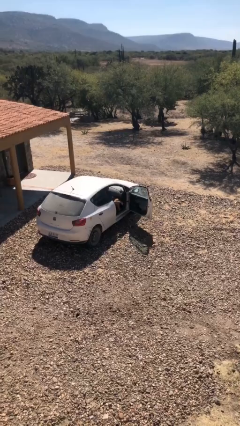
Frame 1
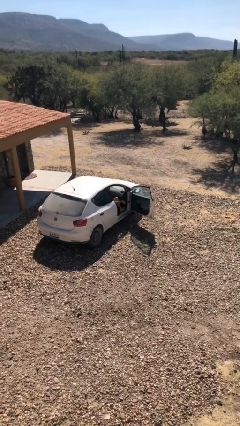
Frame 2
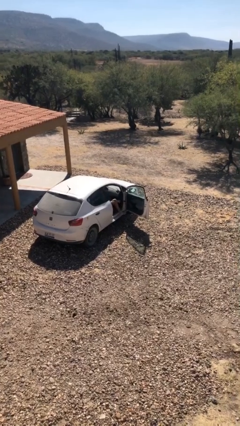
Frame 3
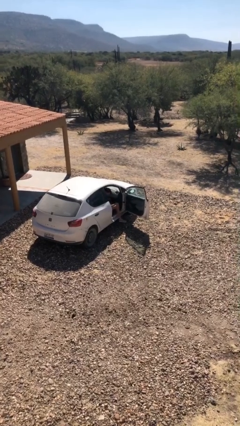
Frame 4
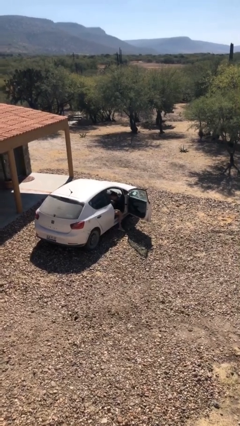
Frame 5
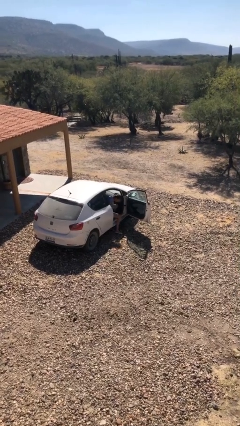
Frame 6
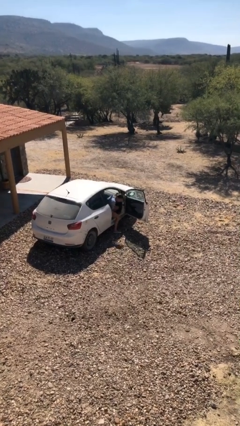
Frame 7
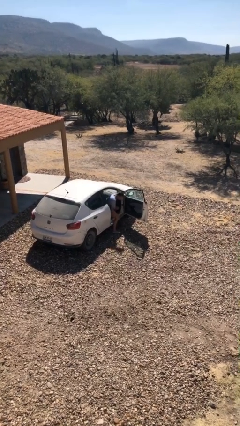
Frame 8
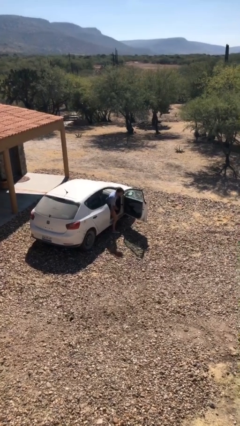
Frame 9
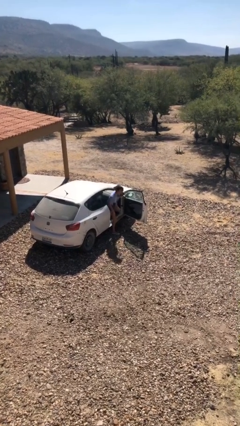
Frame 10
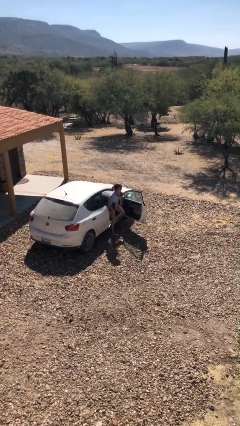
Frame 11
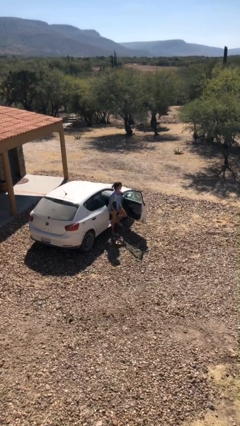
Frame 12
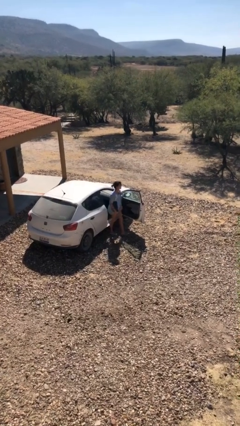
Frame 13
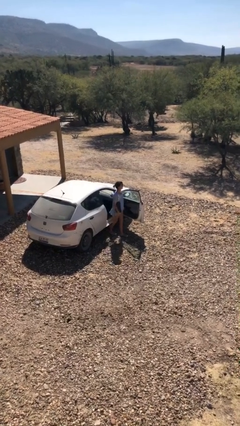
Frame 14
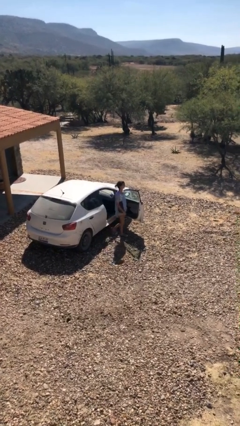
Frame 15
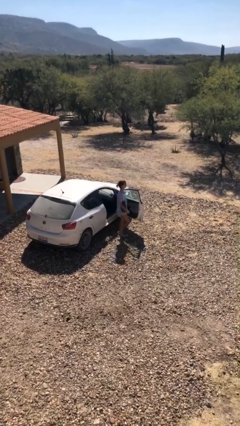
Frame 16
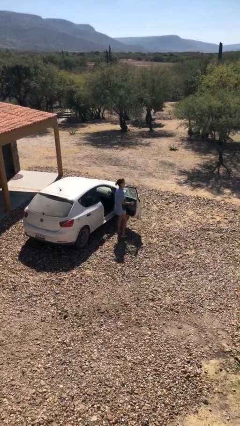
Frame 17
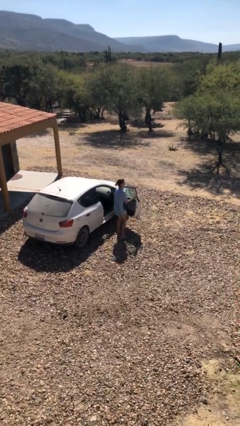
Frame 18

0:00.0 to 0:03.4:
person exits car

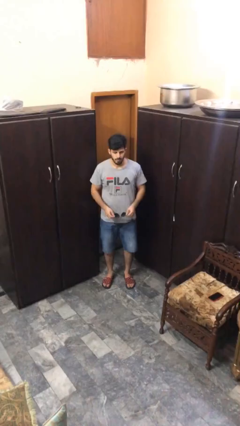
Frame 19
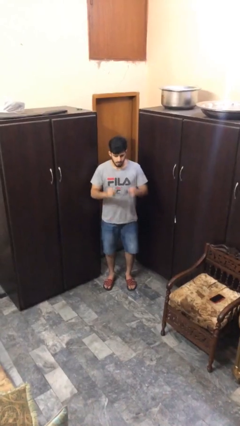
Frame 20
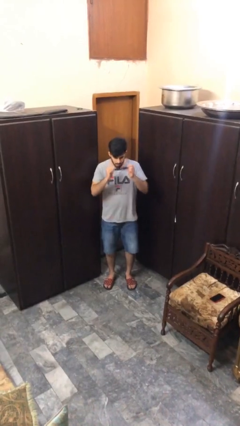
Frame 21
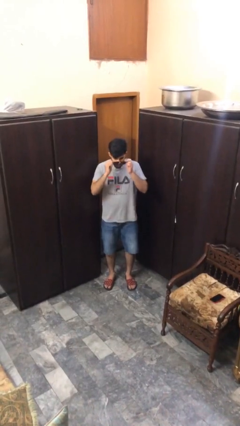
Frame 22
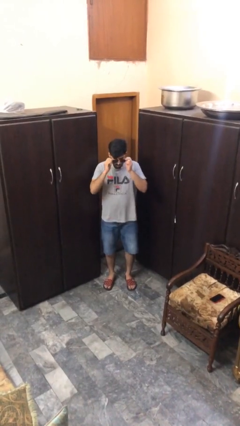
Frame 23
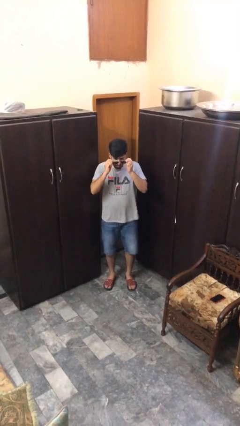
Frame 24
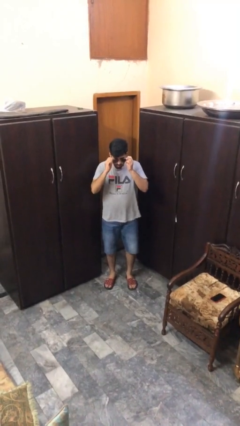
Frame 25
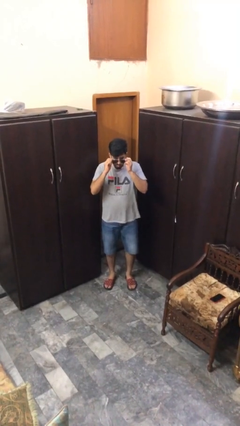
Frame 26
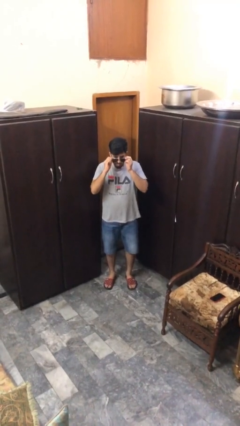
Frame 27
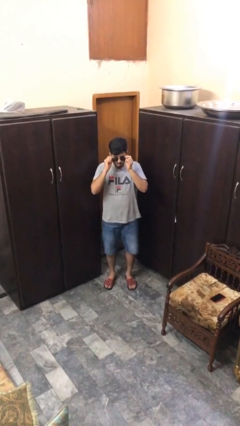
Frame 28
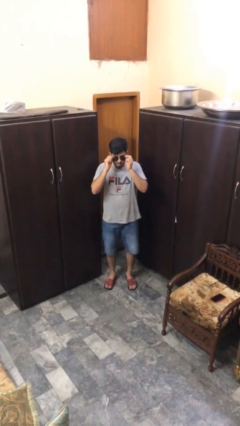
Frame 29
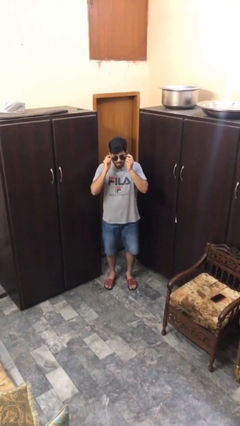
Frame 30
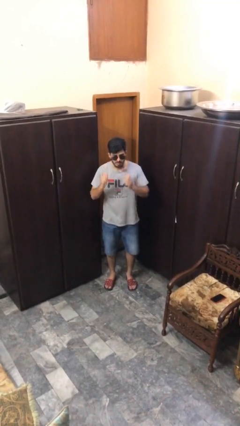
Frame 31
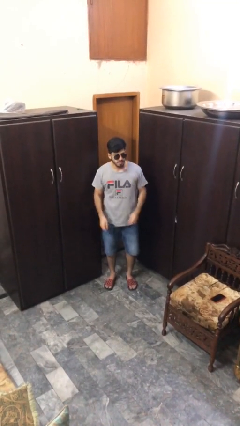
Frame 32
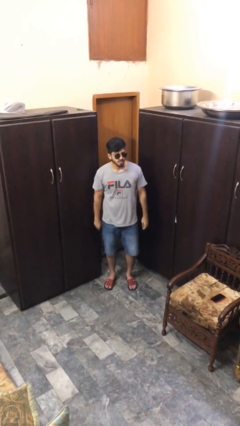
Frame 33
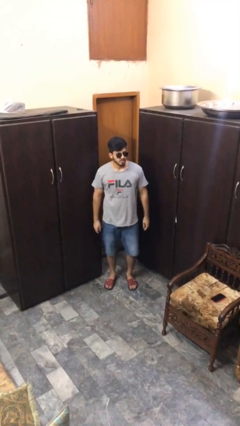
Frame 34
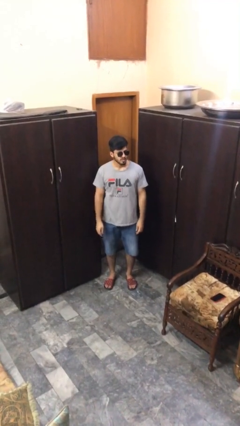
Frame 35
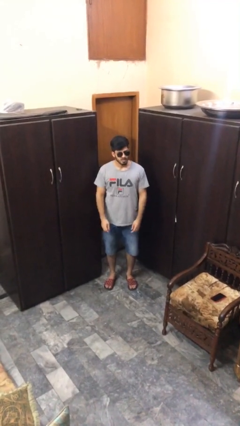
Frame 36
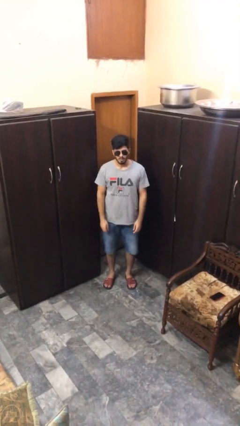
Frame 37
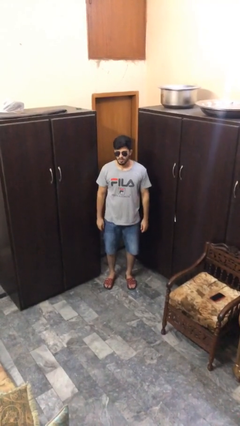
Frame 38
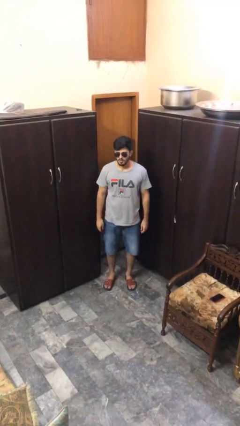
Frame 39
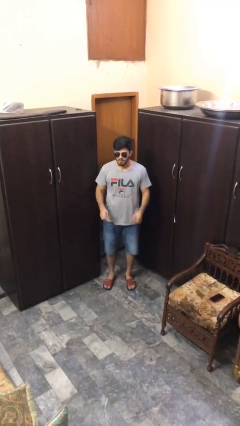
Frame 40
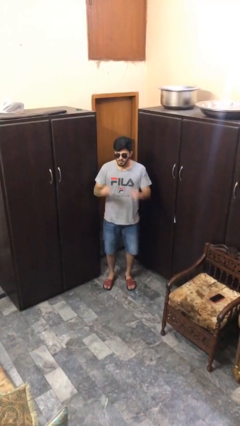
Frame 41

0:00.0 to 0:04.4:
person puts on sunglasses

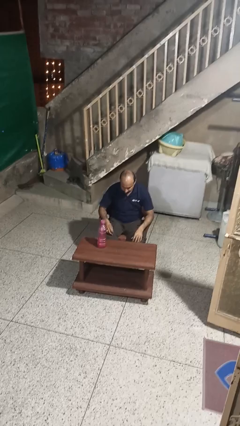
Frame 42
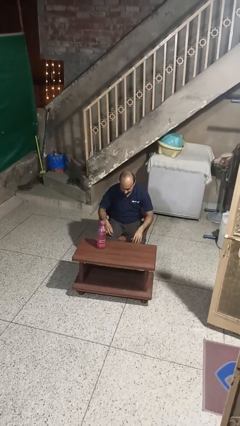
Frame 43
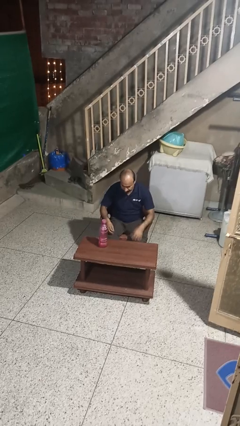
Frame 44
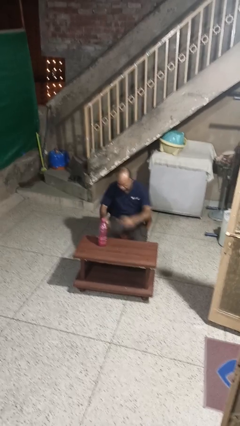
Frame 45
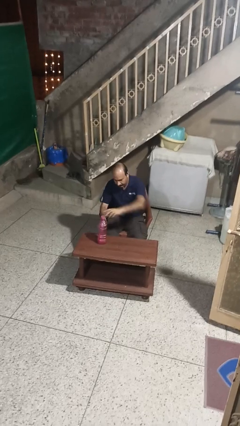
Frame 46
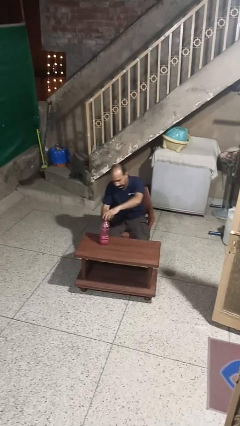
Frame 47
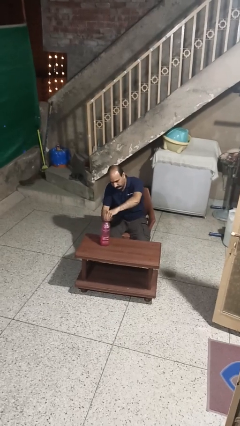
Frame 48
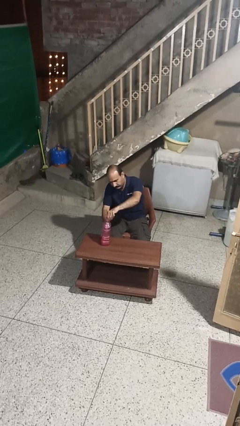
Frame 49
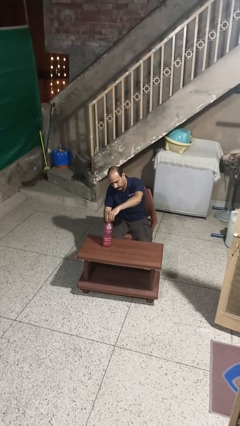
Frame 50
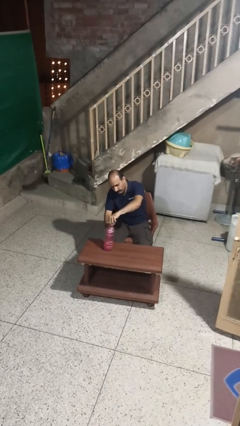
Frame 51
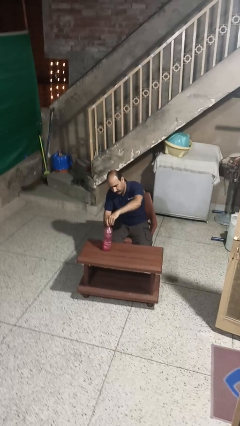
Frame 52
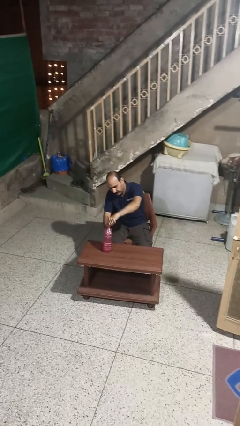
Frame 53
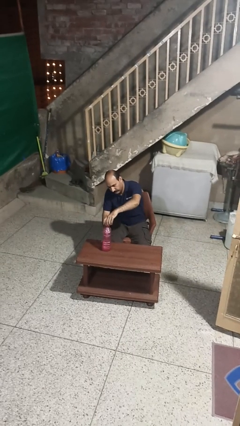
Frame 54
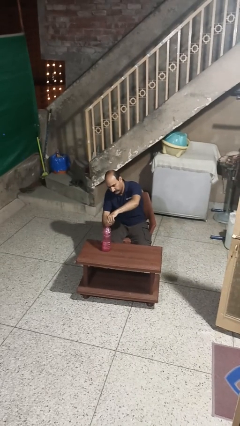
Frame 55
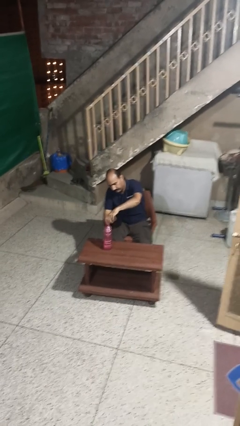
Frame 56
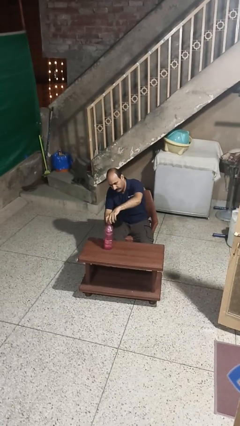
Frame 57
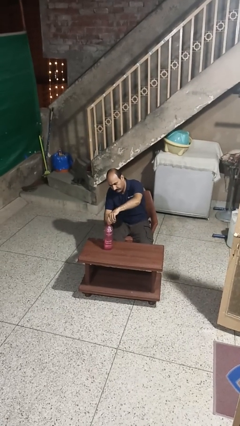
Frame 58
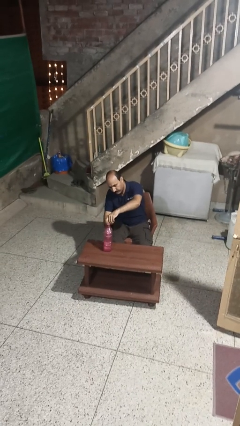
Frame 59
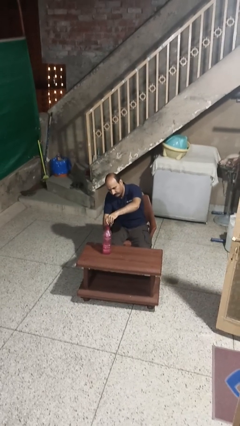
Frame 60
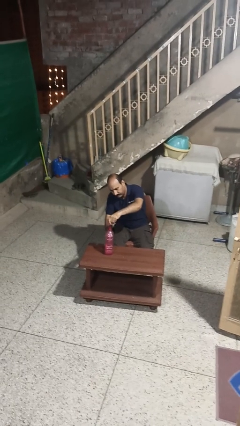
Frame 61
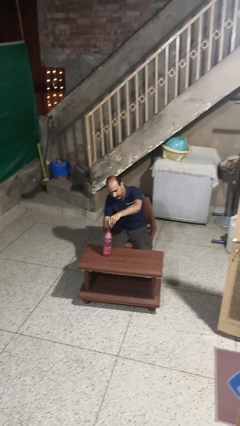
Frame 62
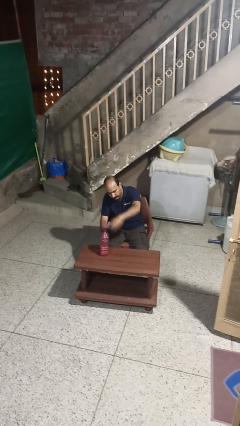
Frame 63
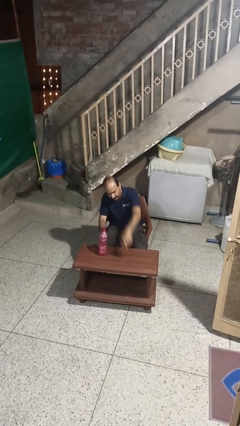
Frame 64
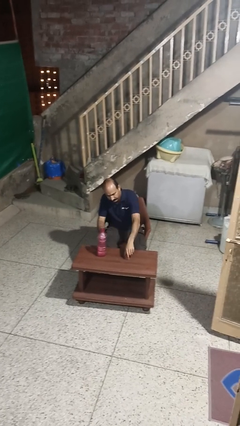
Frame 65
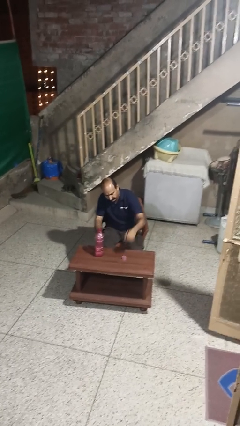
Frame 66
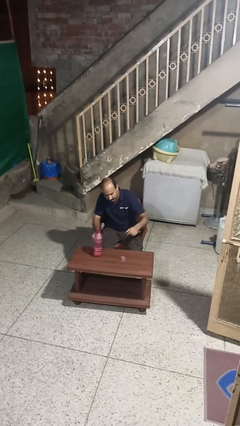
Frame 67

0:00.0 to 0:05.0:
person unscrews lid from bottle

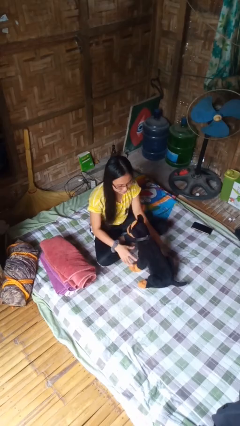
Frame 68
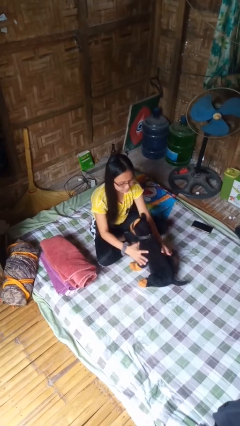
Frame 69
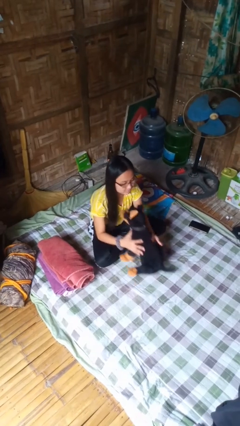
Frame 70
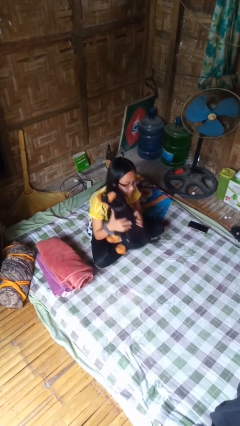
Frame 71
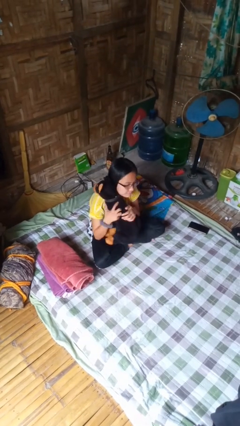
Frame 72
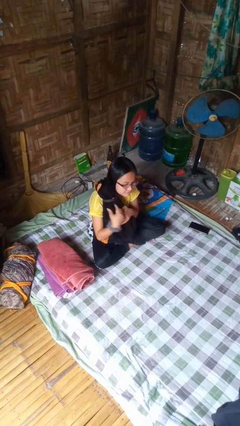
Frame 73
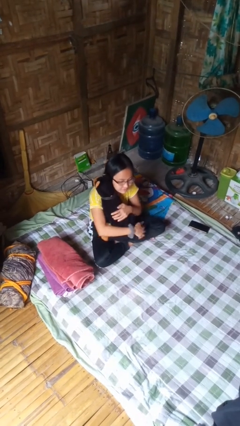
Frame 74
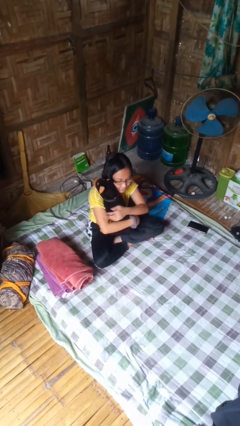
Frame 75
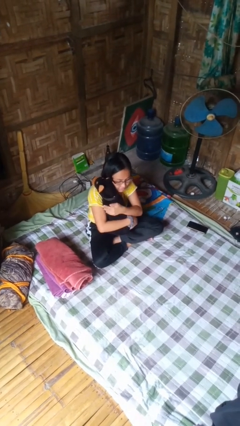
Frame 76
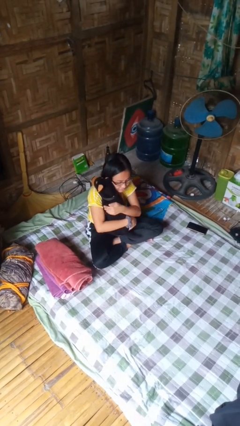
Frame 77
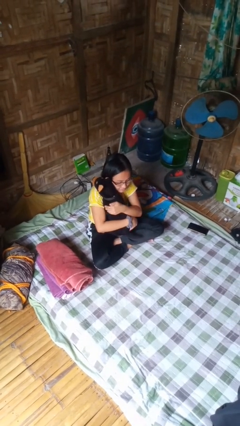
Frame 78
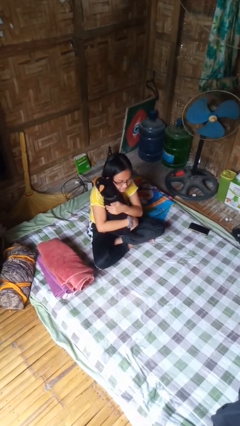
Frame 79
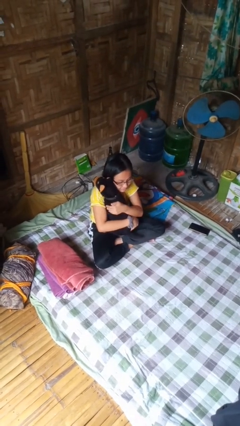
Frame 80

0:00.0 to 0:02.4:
person hugs stuffed animal

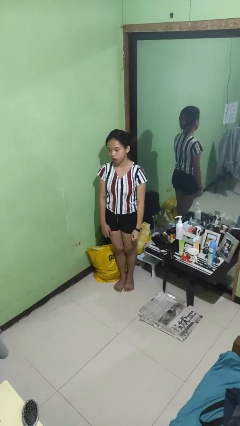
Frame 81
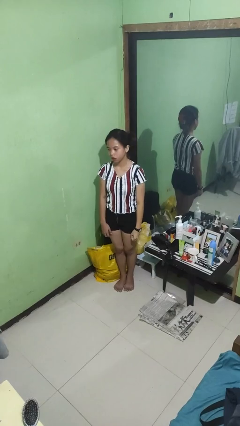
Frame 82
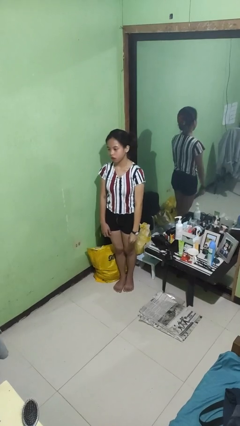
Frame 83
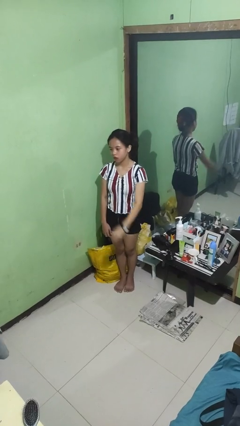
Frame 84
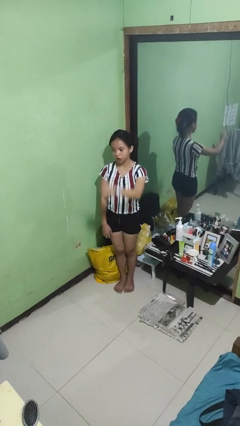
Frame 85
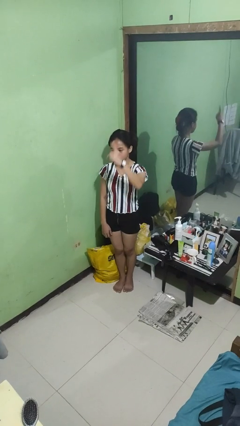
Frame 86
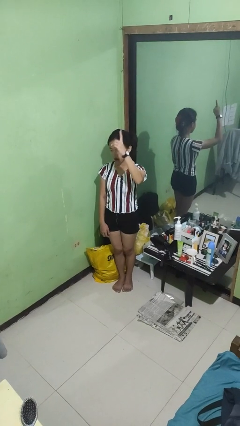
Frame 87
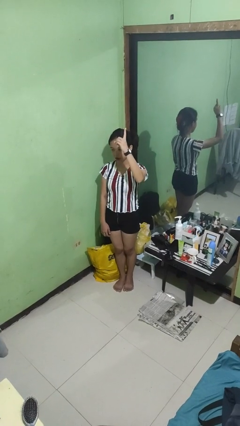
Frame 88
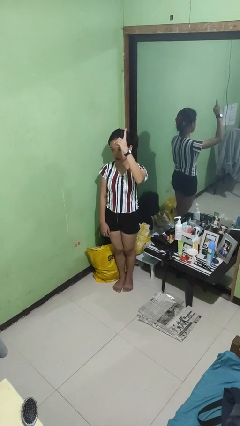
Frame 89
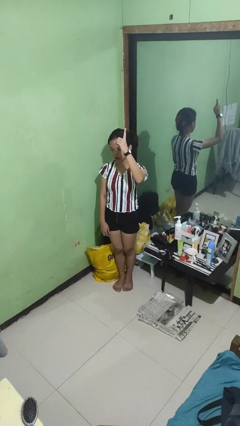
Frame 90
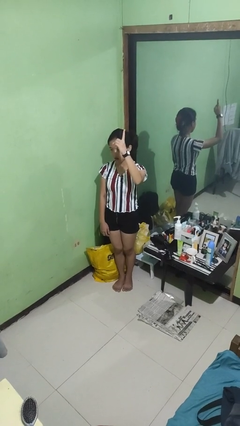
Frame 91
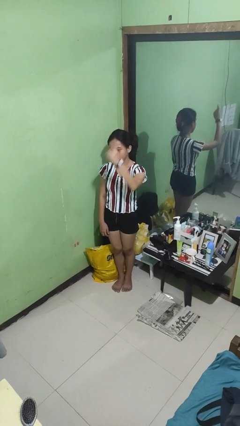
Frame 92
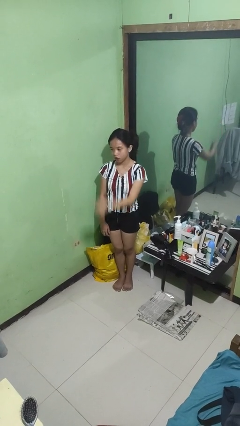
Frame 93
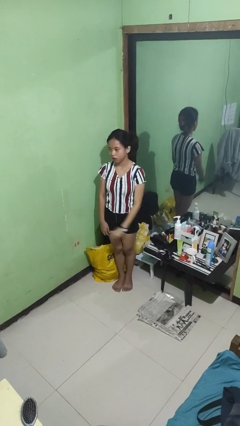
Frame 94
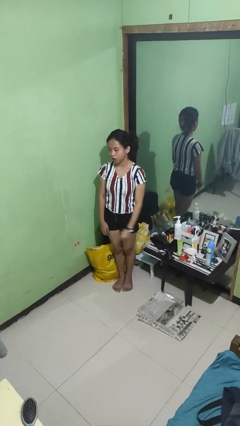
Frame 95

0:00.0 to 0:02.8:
person gestures number one
